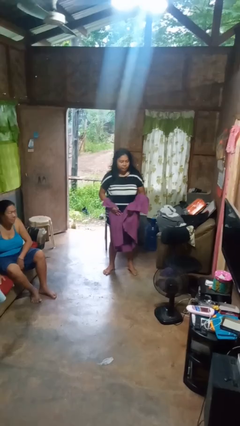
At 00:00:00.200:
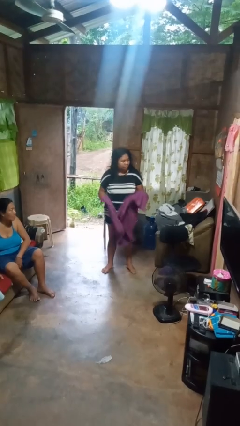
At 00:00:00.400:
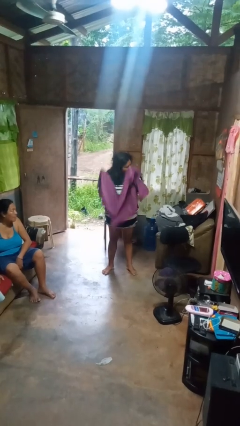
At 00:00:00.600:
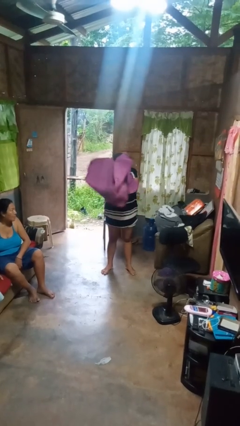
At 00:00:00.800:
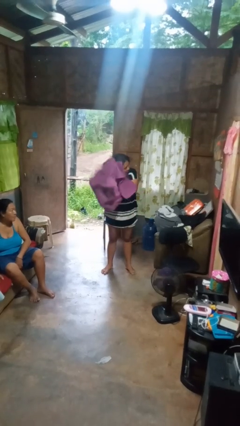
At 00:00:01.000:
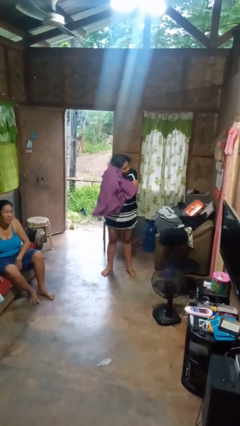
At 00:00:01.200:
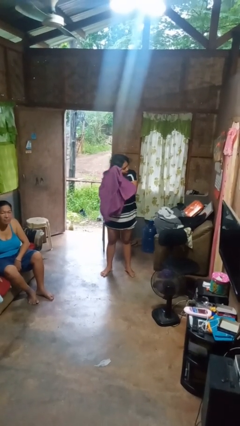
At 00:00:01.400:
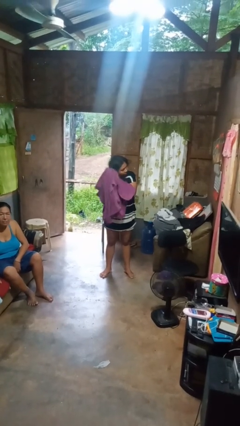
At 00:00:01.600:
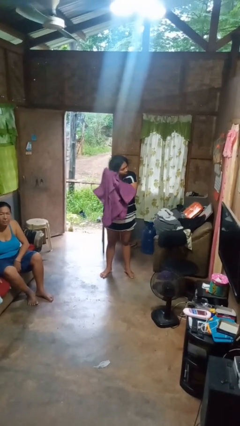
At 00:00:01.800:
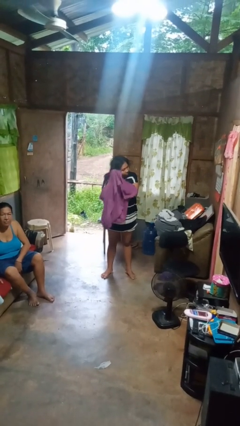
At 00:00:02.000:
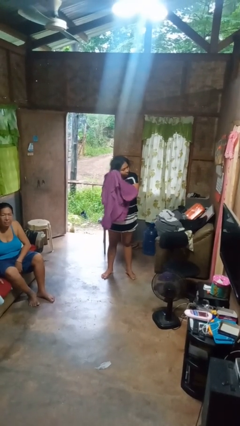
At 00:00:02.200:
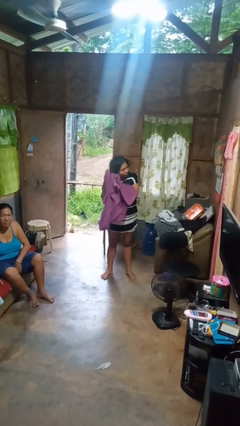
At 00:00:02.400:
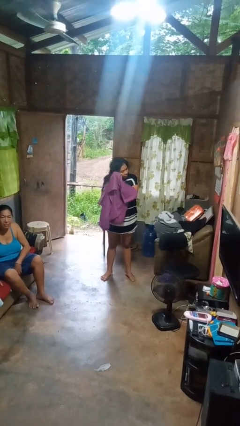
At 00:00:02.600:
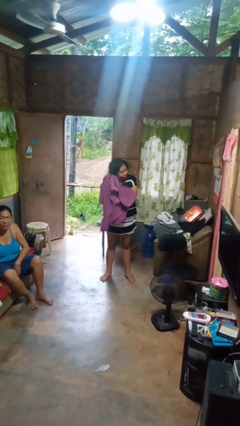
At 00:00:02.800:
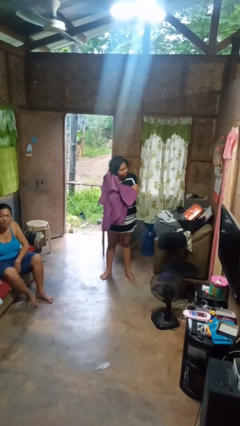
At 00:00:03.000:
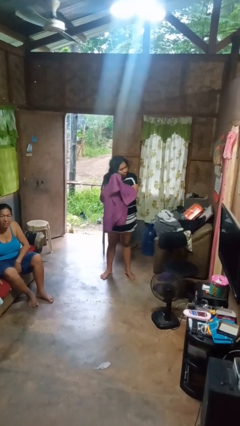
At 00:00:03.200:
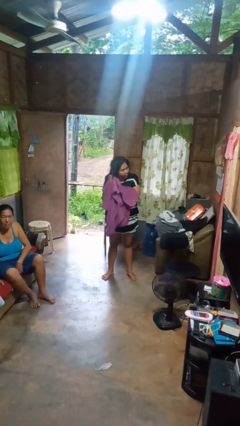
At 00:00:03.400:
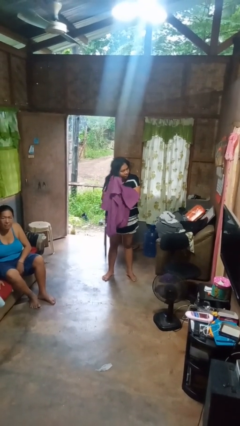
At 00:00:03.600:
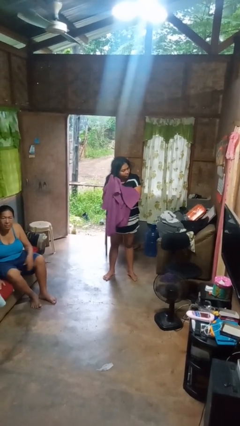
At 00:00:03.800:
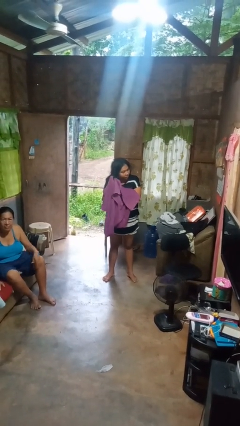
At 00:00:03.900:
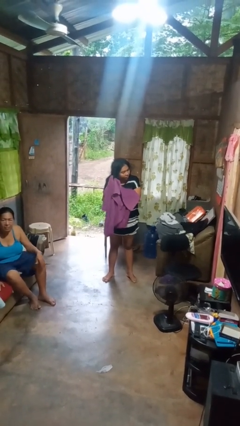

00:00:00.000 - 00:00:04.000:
person dries hair with towel

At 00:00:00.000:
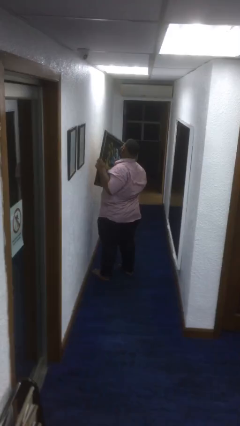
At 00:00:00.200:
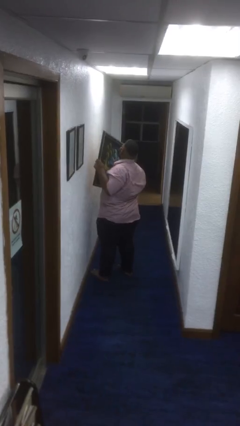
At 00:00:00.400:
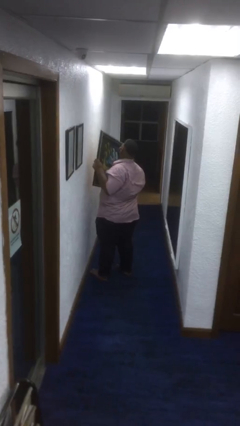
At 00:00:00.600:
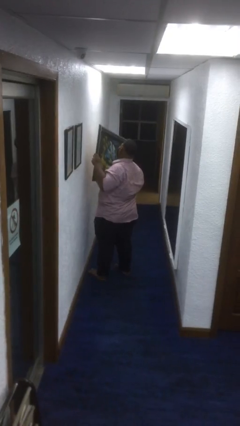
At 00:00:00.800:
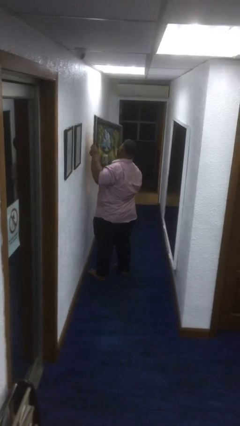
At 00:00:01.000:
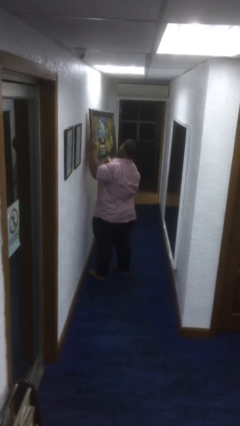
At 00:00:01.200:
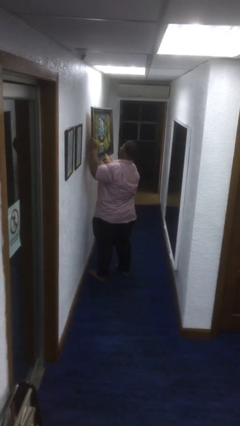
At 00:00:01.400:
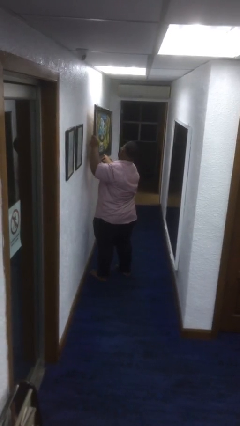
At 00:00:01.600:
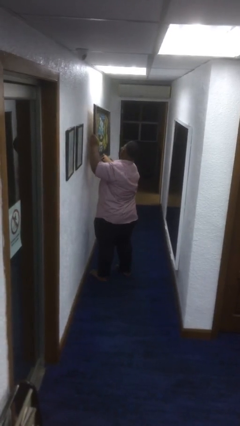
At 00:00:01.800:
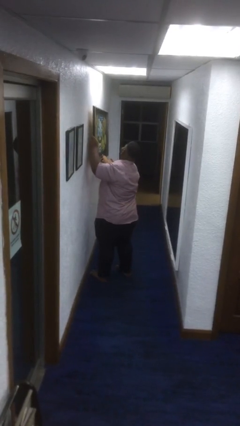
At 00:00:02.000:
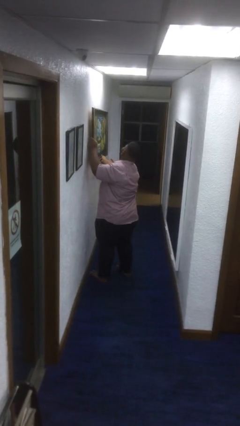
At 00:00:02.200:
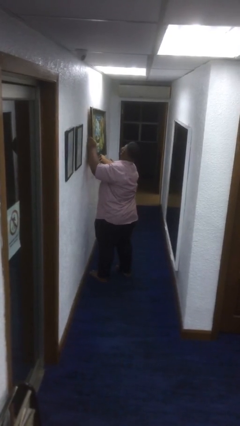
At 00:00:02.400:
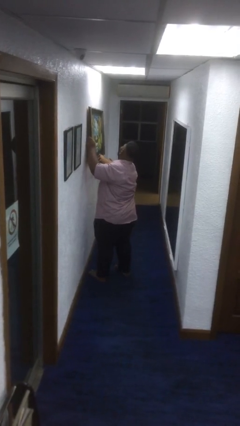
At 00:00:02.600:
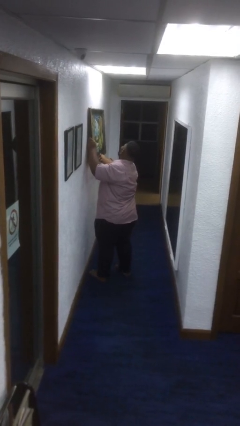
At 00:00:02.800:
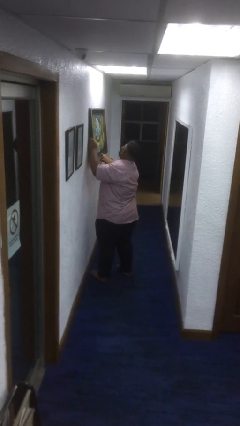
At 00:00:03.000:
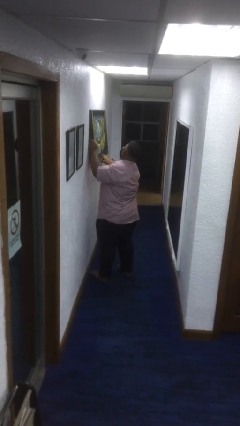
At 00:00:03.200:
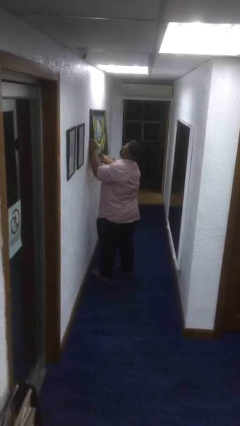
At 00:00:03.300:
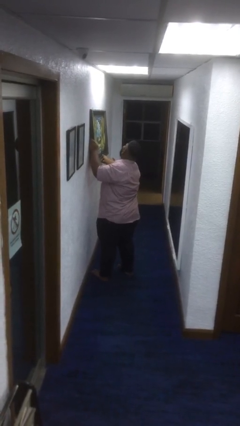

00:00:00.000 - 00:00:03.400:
person puts up picture frame

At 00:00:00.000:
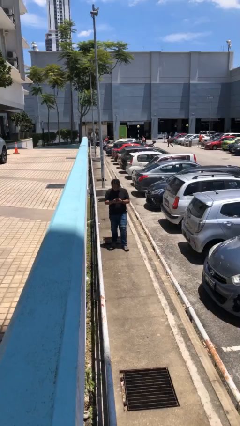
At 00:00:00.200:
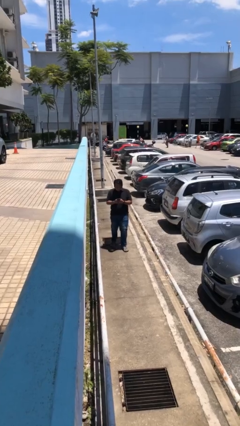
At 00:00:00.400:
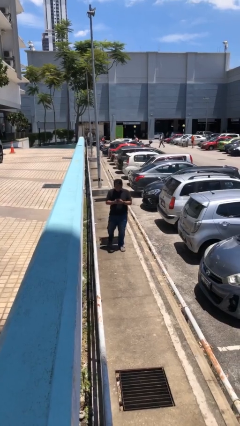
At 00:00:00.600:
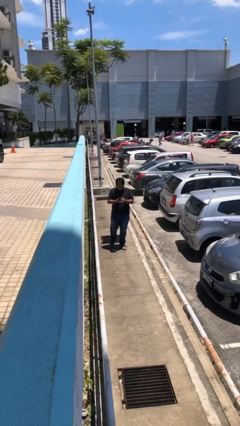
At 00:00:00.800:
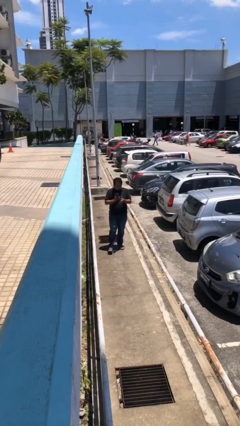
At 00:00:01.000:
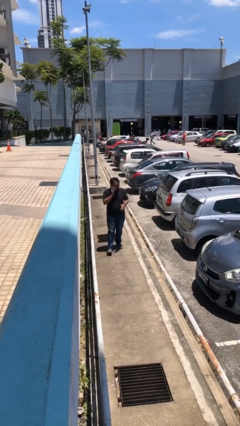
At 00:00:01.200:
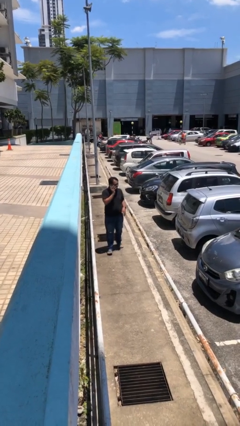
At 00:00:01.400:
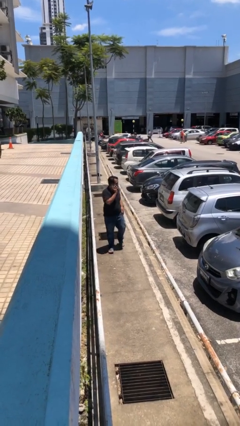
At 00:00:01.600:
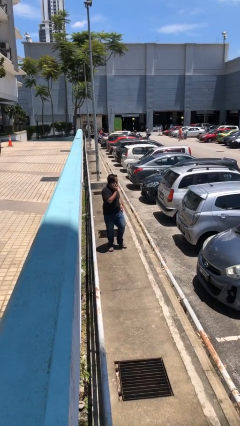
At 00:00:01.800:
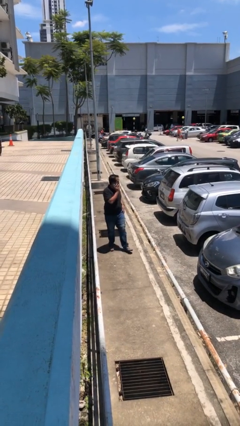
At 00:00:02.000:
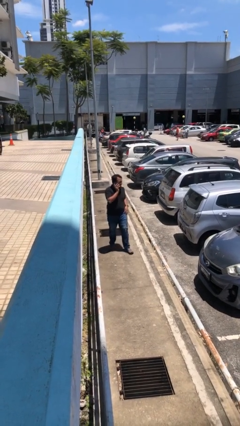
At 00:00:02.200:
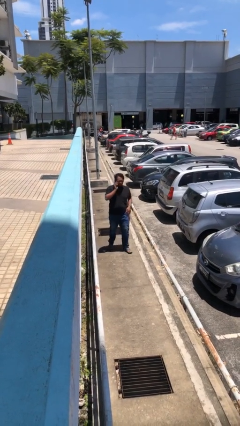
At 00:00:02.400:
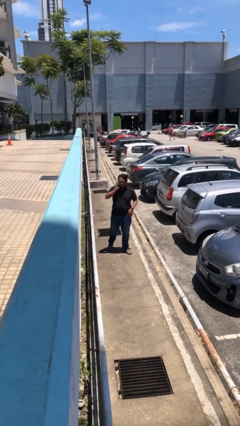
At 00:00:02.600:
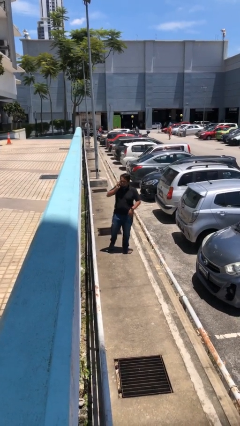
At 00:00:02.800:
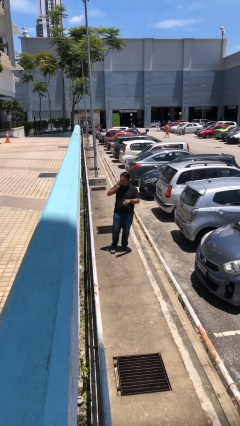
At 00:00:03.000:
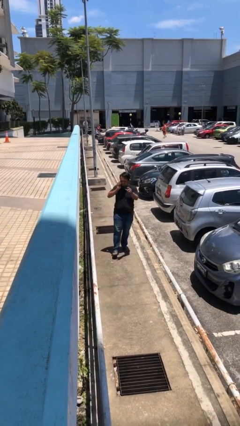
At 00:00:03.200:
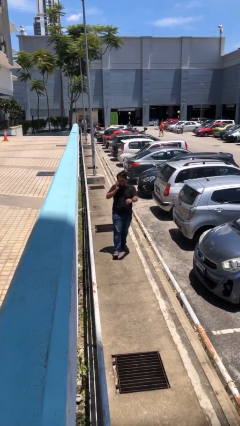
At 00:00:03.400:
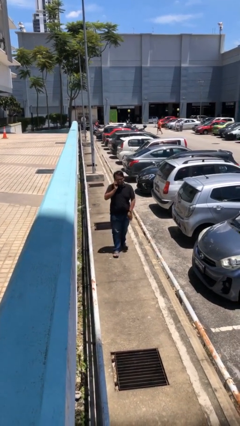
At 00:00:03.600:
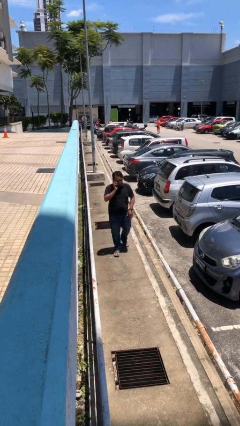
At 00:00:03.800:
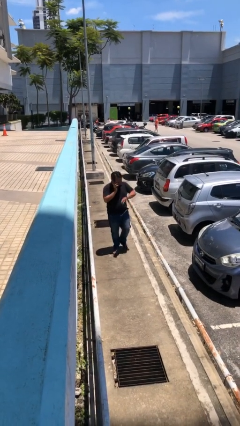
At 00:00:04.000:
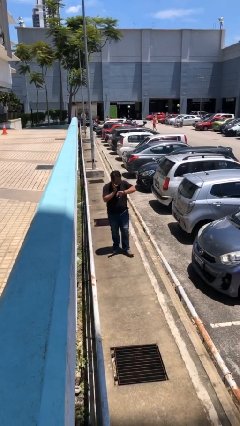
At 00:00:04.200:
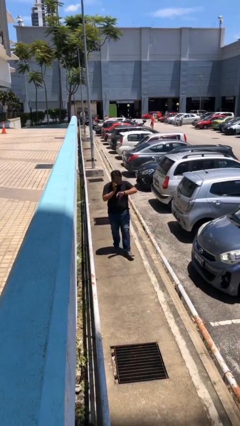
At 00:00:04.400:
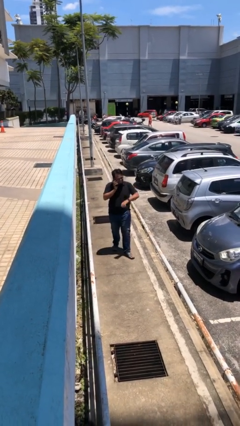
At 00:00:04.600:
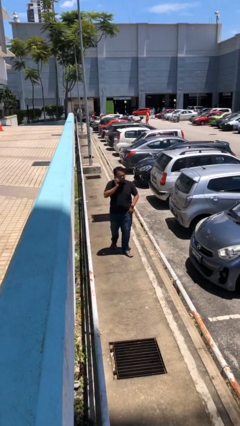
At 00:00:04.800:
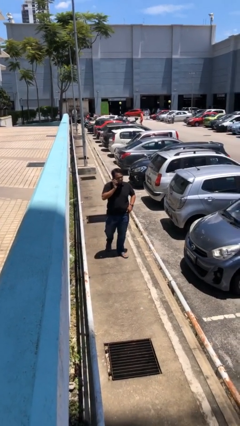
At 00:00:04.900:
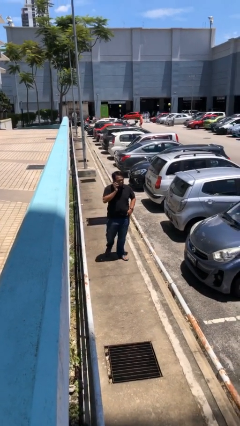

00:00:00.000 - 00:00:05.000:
person talks on phone

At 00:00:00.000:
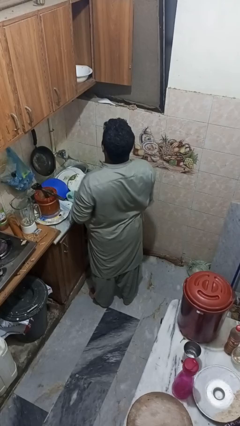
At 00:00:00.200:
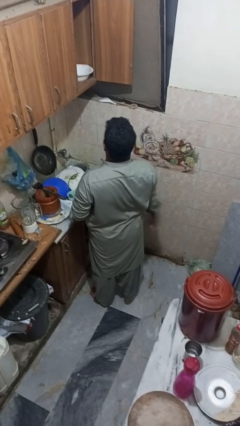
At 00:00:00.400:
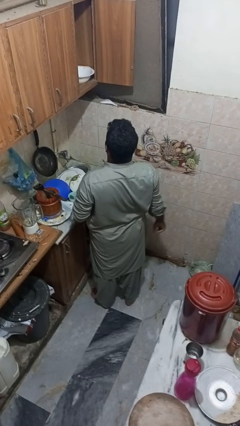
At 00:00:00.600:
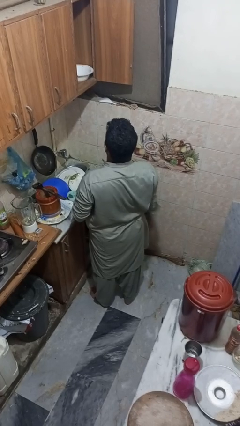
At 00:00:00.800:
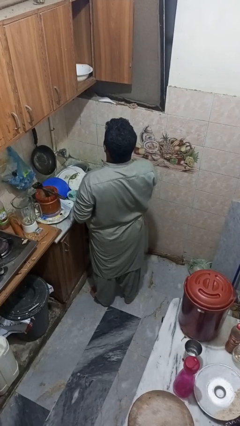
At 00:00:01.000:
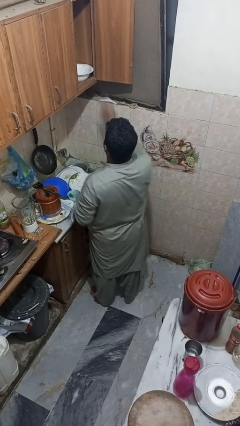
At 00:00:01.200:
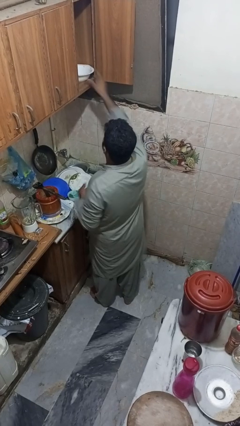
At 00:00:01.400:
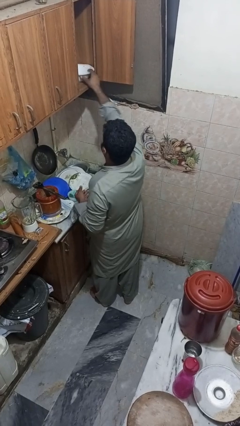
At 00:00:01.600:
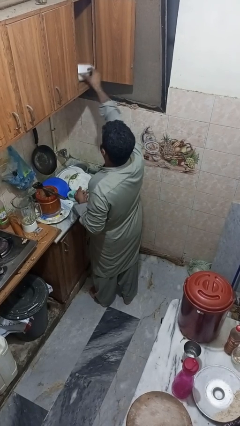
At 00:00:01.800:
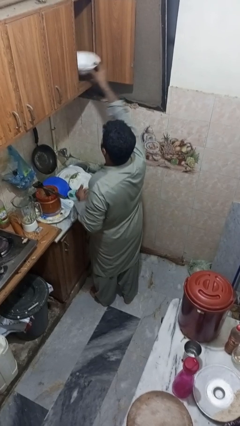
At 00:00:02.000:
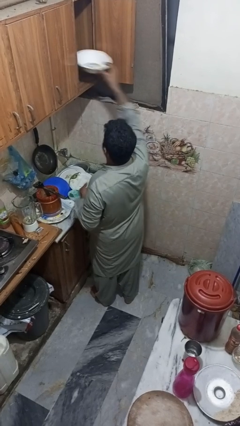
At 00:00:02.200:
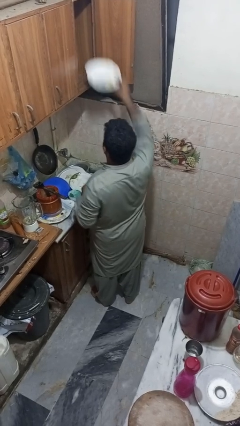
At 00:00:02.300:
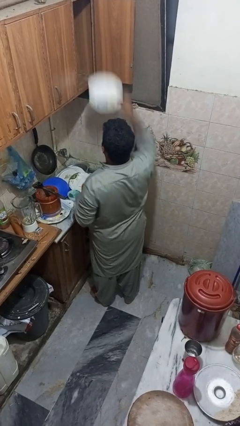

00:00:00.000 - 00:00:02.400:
person takes object from cabinet

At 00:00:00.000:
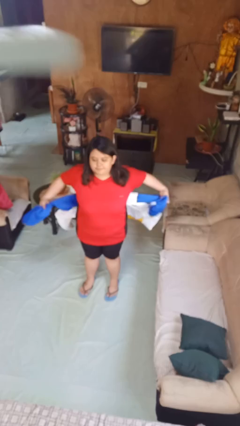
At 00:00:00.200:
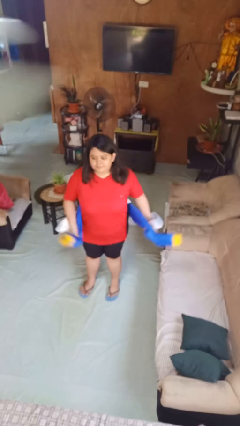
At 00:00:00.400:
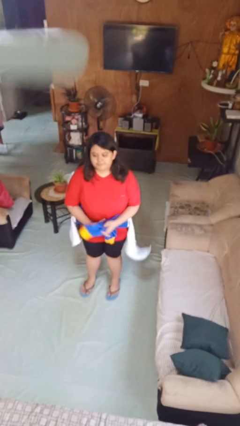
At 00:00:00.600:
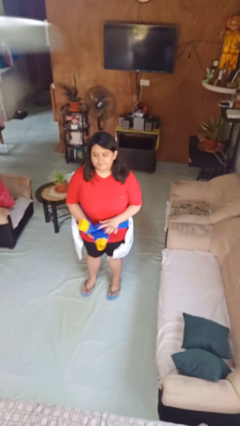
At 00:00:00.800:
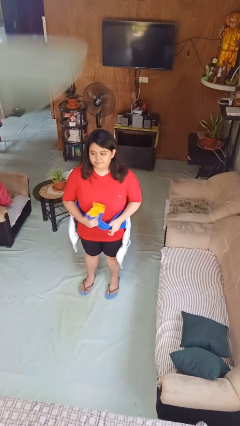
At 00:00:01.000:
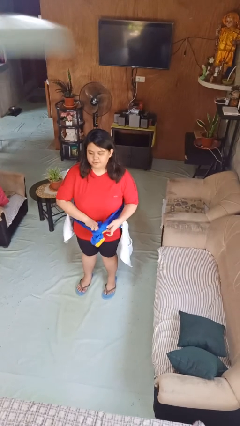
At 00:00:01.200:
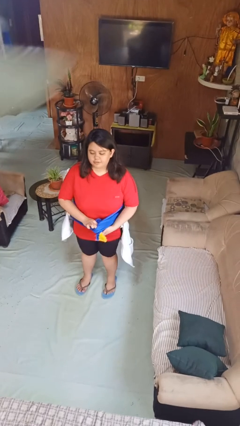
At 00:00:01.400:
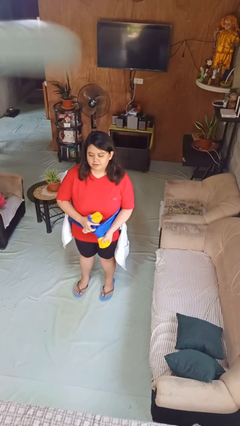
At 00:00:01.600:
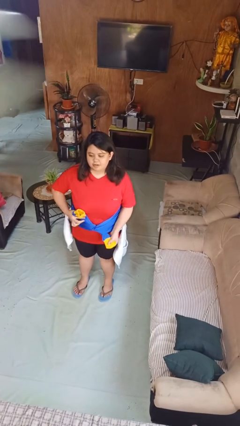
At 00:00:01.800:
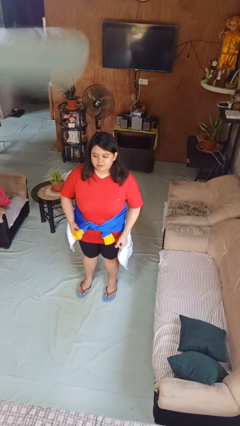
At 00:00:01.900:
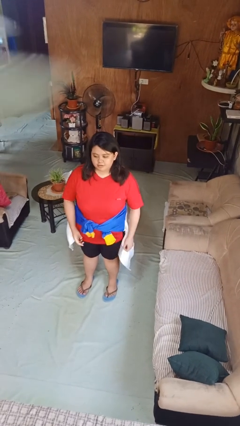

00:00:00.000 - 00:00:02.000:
person ties jacket around waist

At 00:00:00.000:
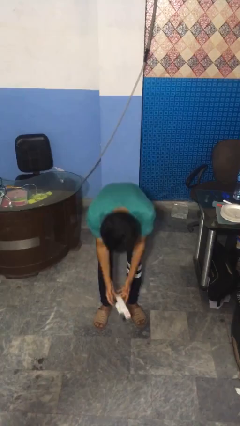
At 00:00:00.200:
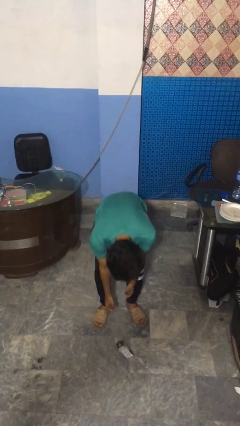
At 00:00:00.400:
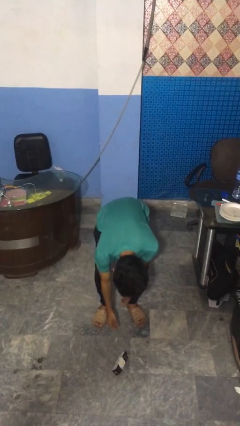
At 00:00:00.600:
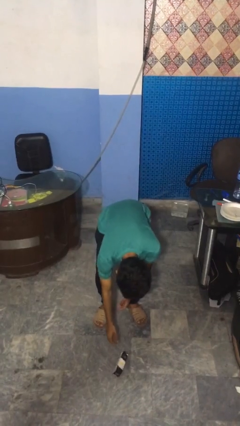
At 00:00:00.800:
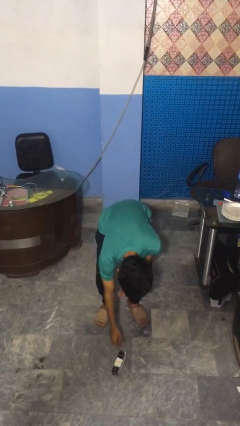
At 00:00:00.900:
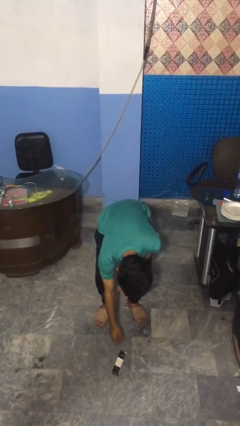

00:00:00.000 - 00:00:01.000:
person catches dropped object
